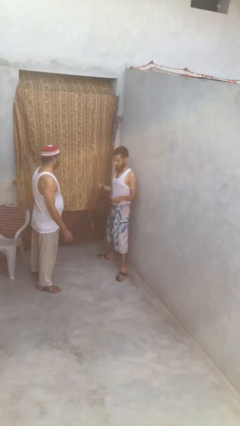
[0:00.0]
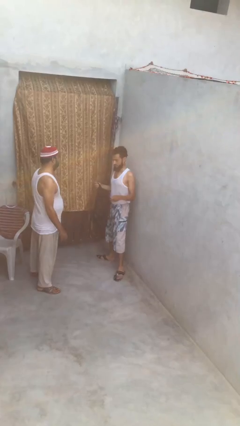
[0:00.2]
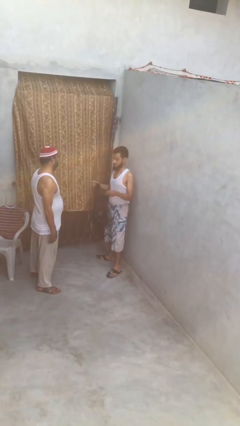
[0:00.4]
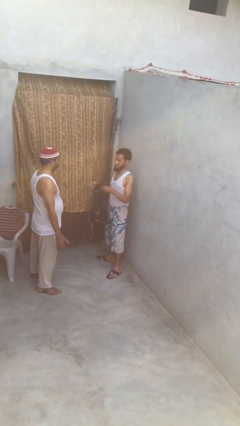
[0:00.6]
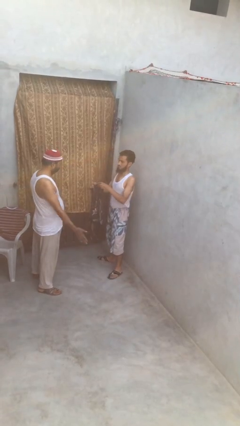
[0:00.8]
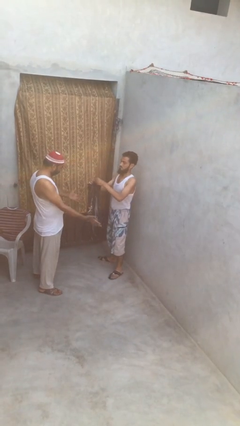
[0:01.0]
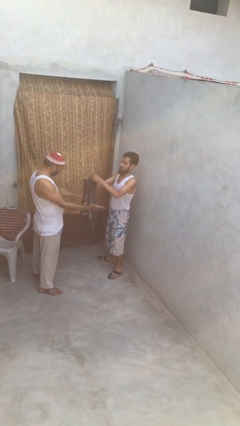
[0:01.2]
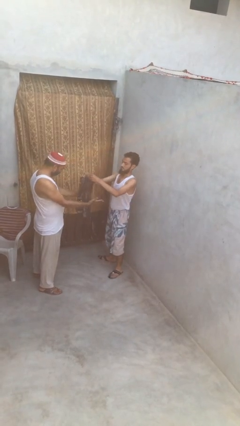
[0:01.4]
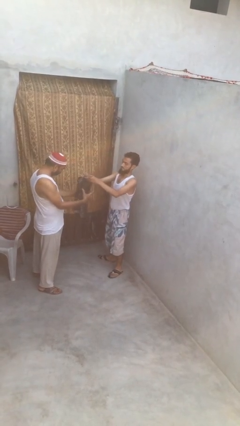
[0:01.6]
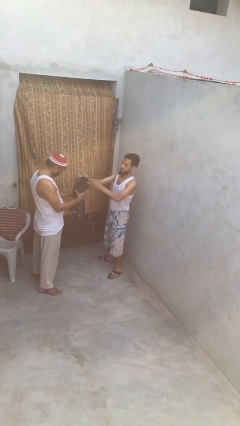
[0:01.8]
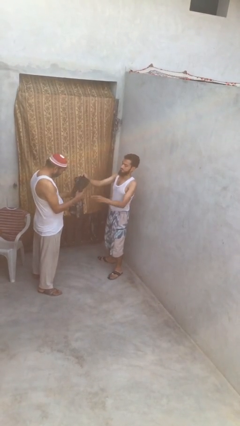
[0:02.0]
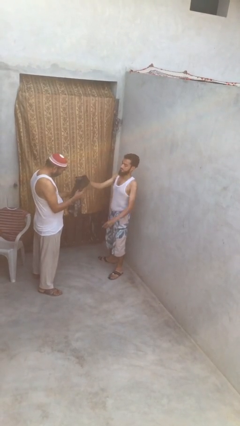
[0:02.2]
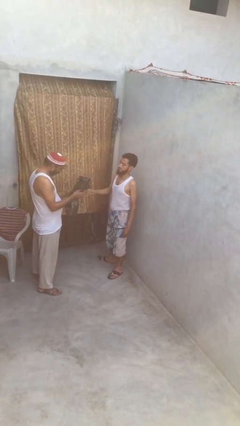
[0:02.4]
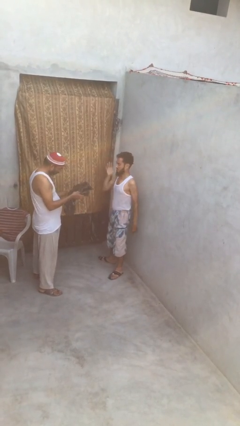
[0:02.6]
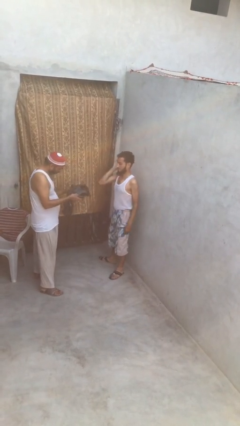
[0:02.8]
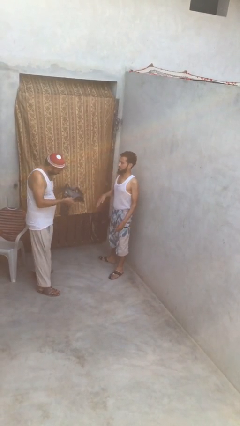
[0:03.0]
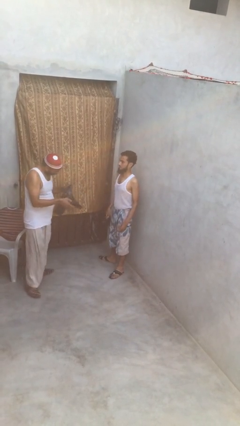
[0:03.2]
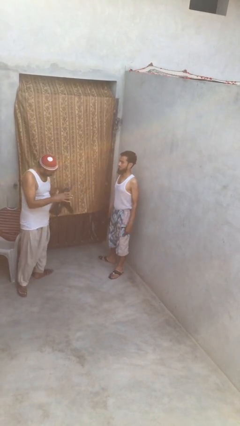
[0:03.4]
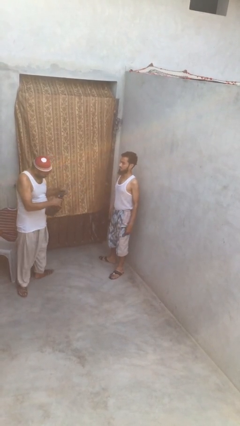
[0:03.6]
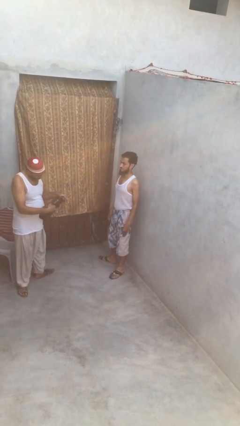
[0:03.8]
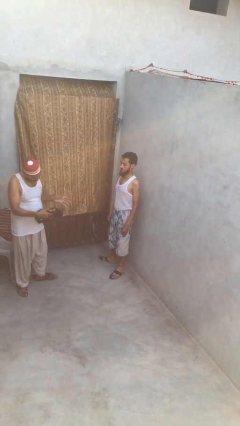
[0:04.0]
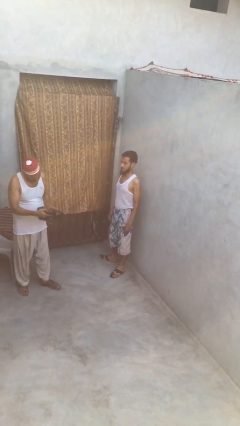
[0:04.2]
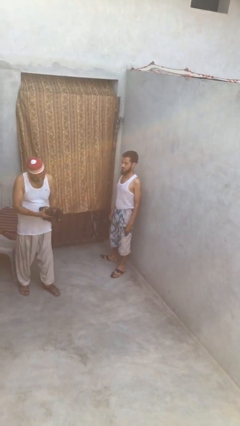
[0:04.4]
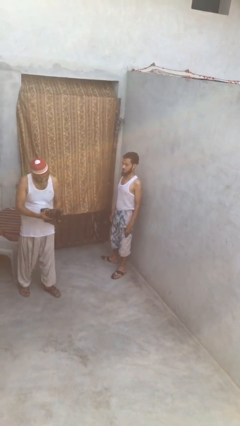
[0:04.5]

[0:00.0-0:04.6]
person transfers object to person

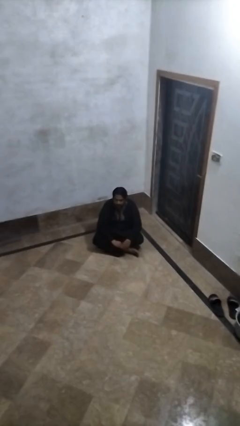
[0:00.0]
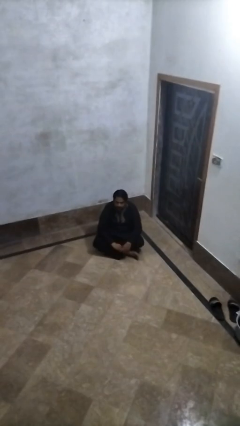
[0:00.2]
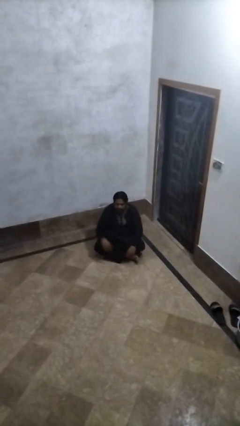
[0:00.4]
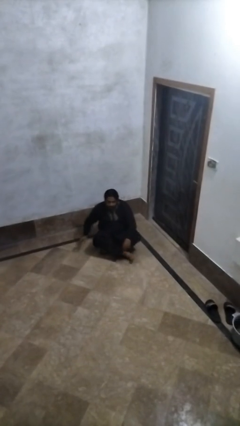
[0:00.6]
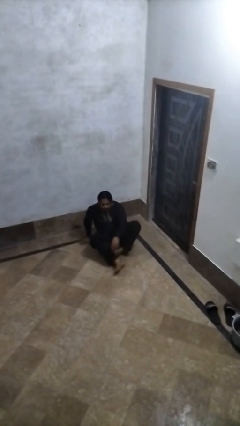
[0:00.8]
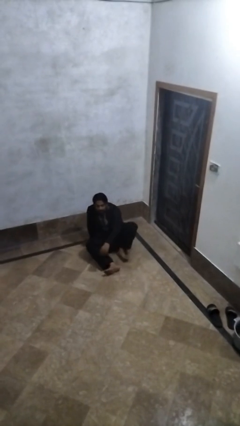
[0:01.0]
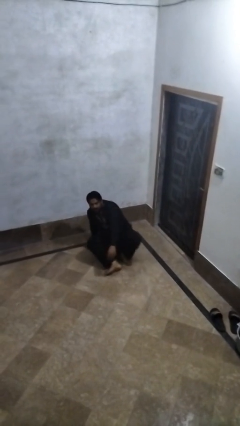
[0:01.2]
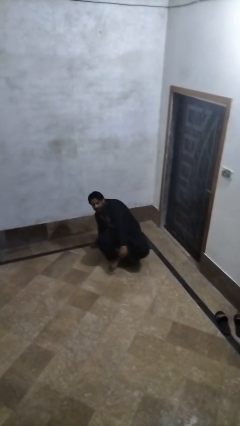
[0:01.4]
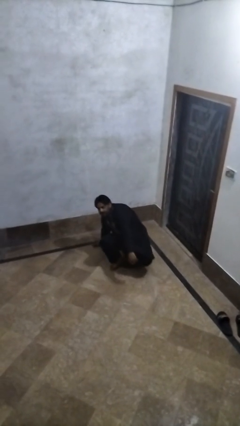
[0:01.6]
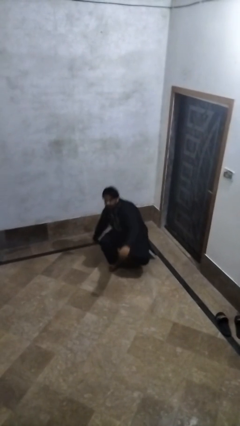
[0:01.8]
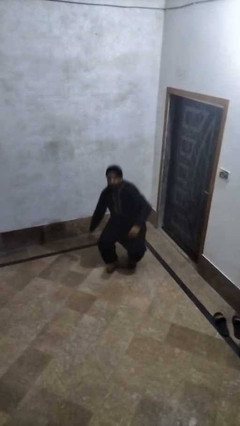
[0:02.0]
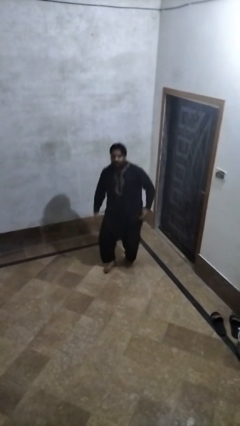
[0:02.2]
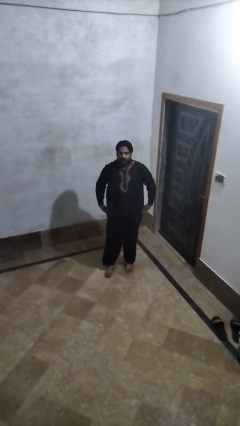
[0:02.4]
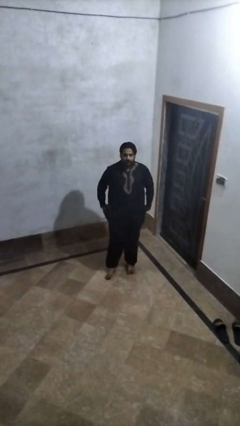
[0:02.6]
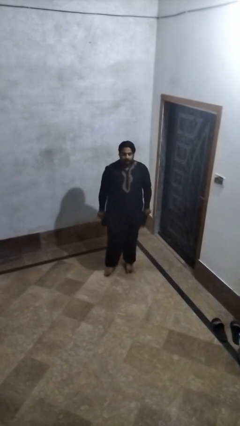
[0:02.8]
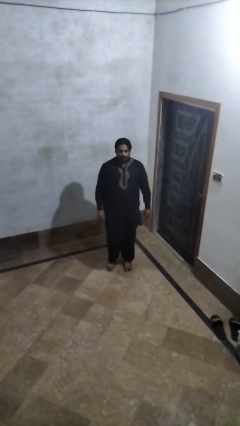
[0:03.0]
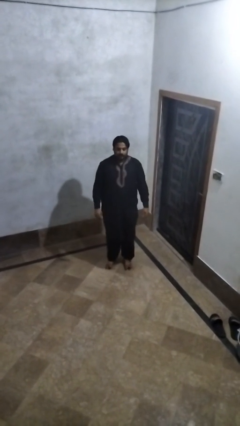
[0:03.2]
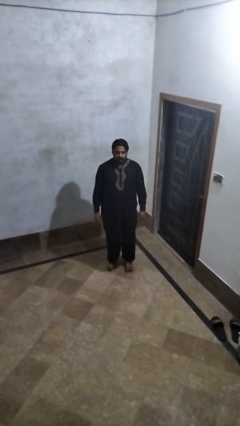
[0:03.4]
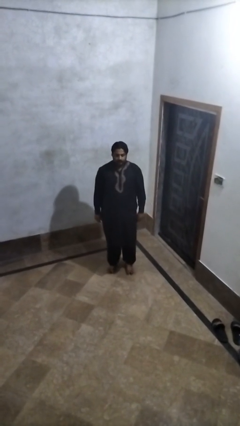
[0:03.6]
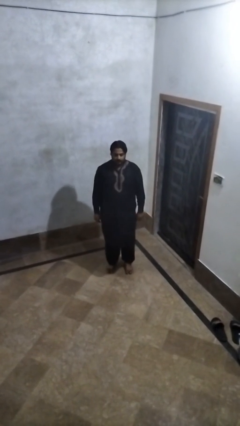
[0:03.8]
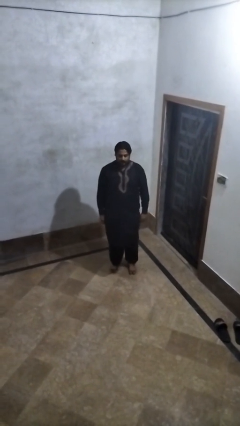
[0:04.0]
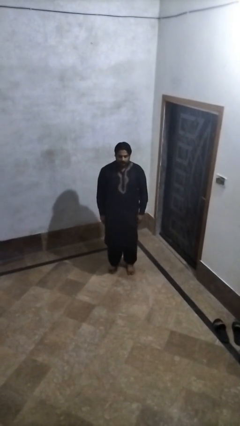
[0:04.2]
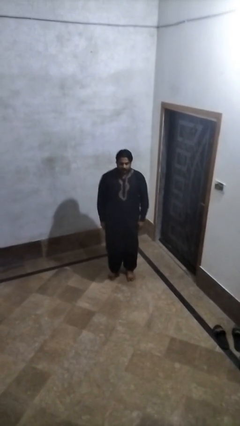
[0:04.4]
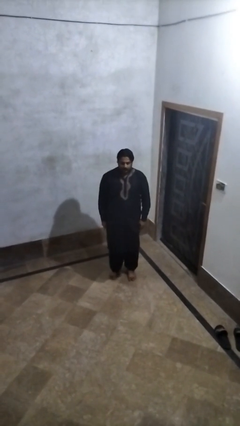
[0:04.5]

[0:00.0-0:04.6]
person stands up from floor

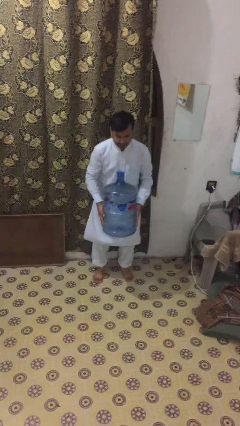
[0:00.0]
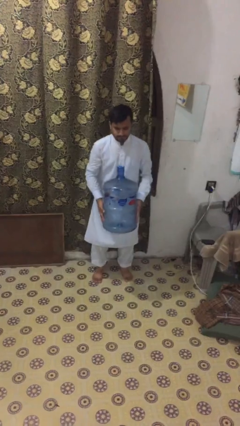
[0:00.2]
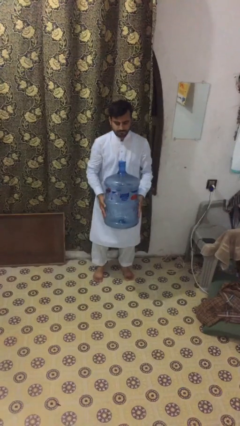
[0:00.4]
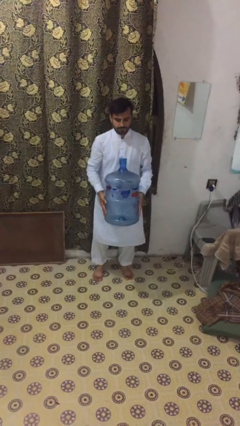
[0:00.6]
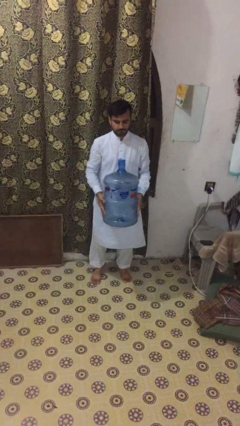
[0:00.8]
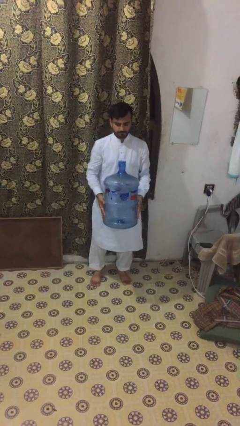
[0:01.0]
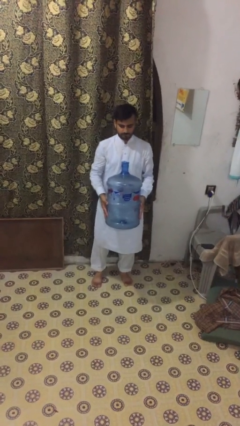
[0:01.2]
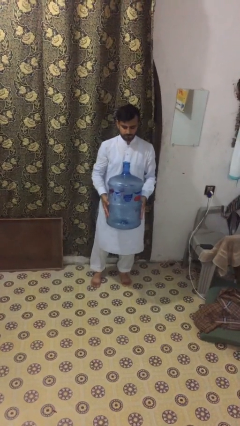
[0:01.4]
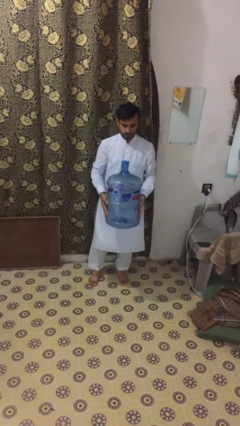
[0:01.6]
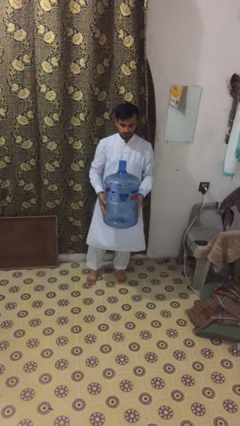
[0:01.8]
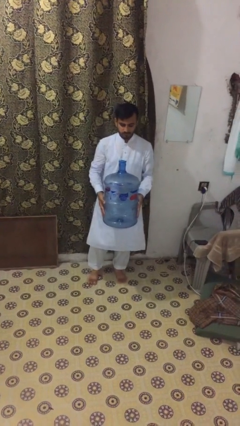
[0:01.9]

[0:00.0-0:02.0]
person carries heavy object

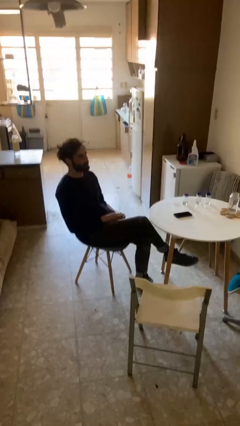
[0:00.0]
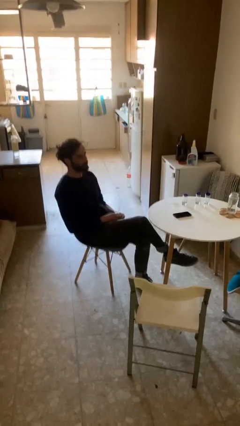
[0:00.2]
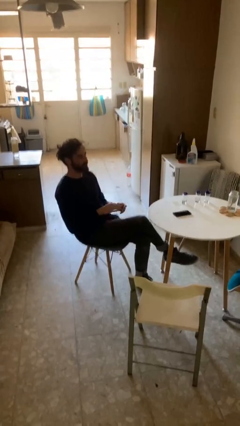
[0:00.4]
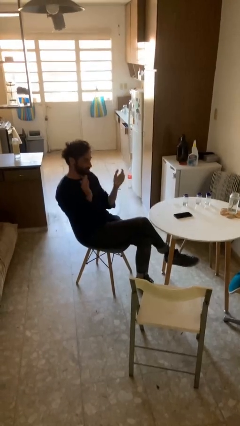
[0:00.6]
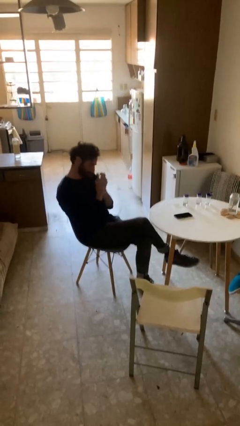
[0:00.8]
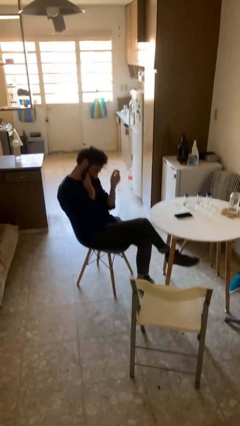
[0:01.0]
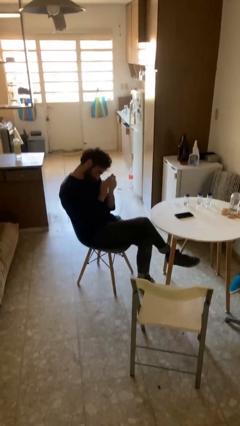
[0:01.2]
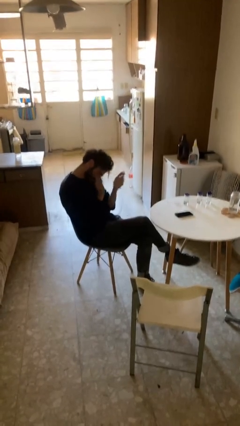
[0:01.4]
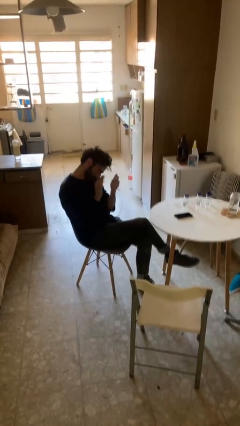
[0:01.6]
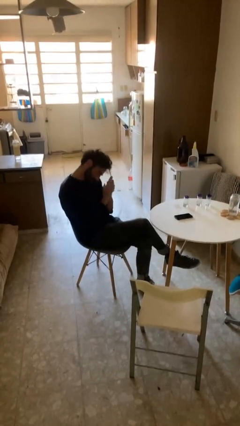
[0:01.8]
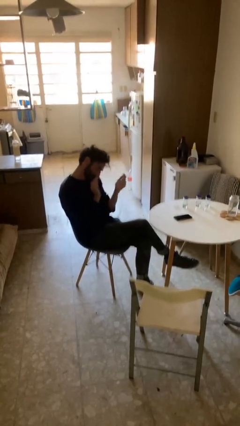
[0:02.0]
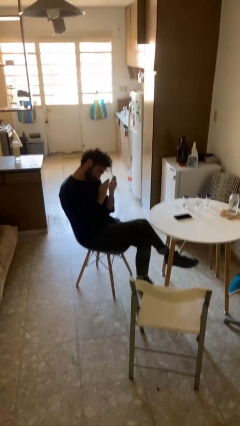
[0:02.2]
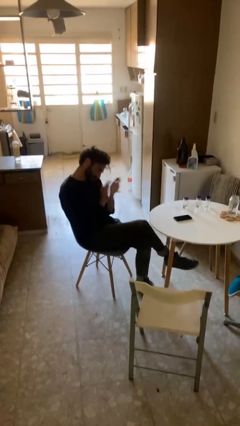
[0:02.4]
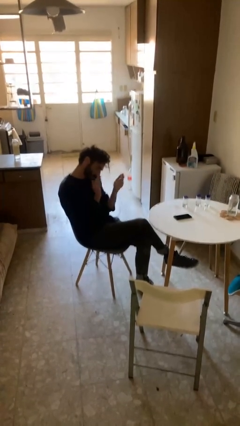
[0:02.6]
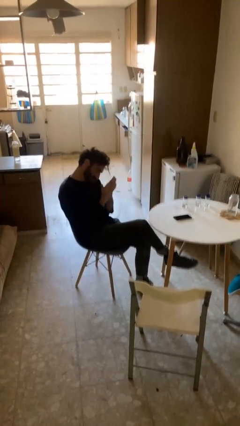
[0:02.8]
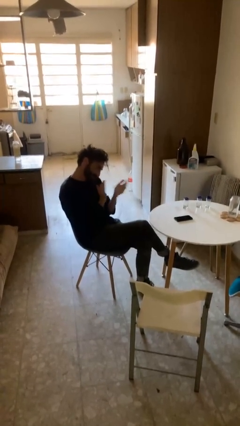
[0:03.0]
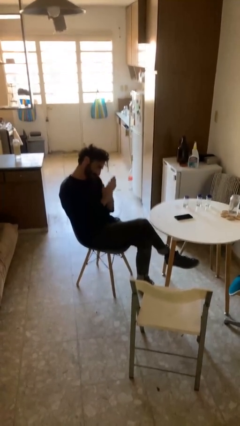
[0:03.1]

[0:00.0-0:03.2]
person claps hands

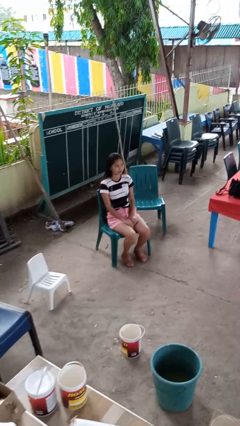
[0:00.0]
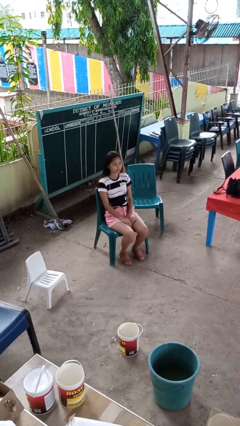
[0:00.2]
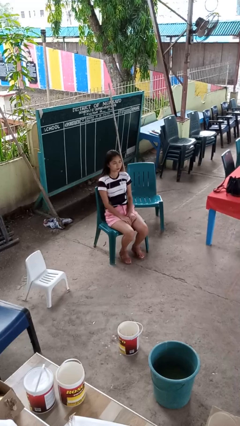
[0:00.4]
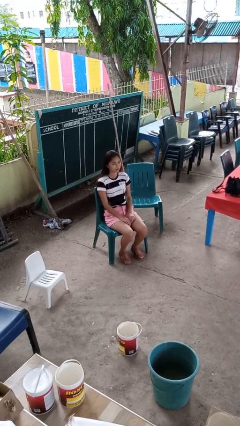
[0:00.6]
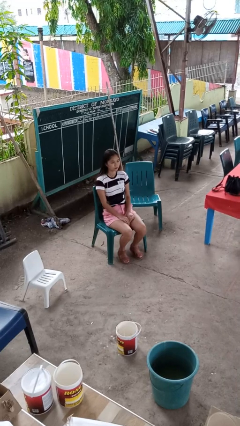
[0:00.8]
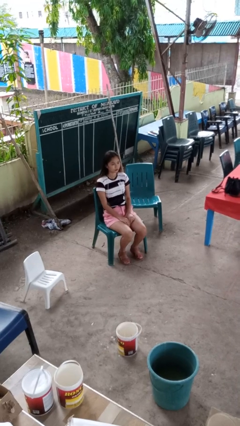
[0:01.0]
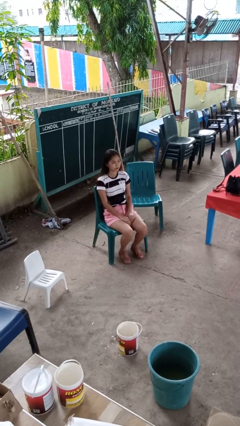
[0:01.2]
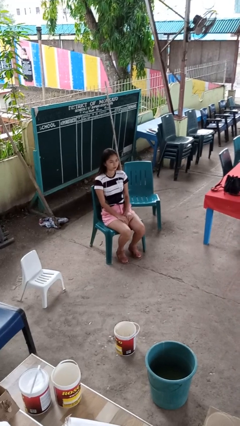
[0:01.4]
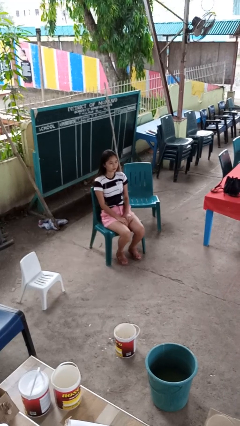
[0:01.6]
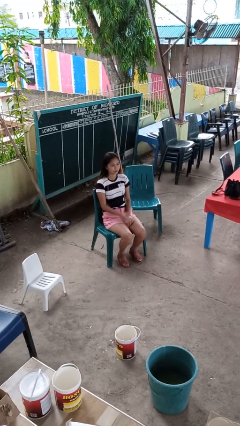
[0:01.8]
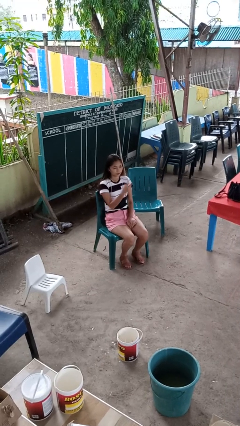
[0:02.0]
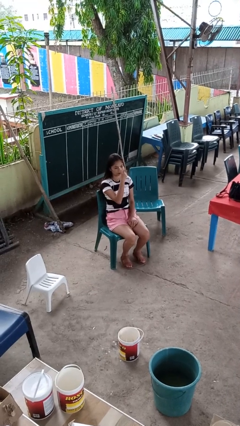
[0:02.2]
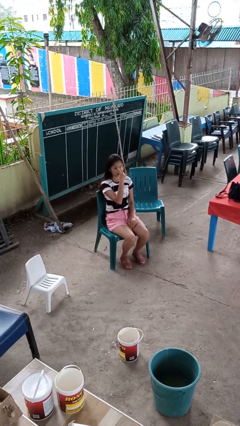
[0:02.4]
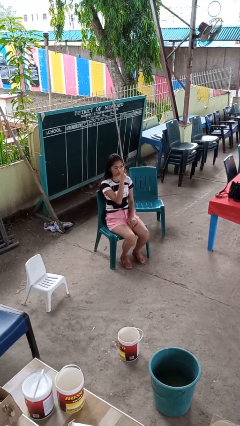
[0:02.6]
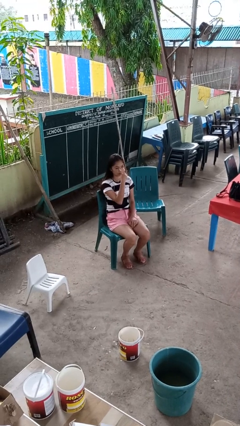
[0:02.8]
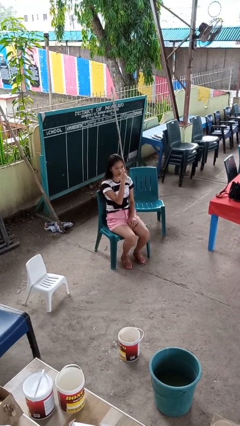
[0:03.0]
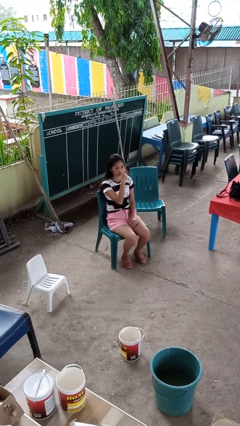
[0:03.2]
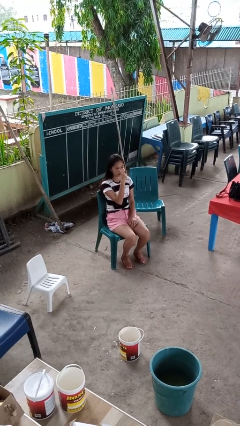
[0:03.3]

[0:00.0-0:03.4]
person gestures watch closely
